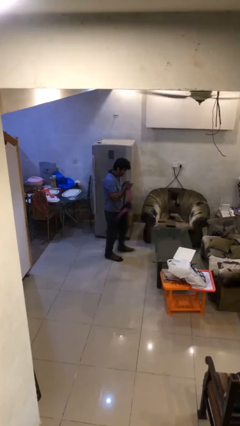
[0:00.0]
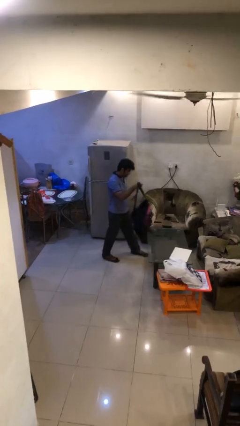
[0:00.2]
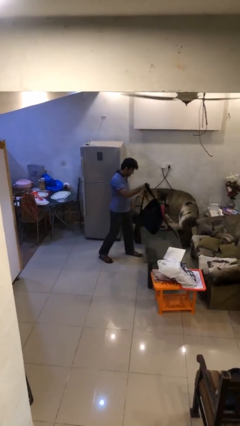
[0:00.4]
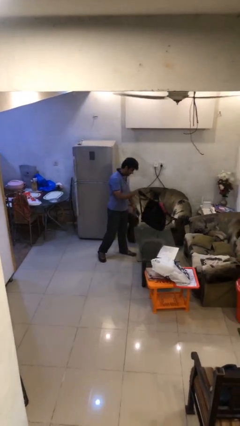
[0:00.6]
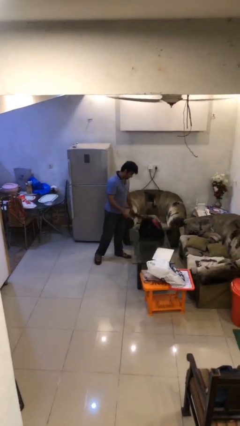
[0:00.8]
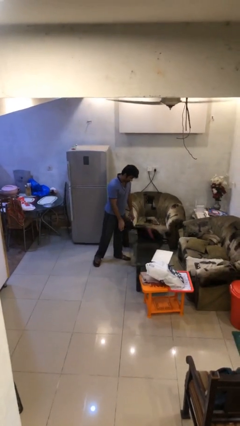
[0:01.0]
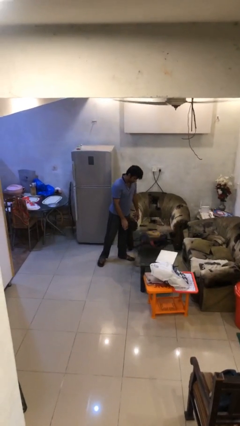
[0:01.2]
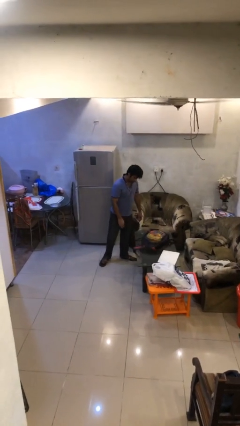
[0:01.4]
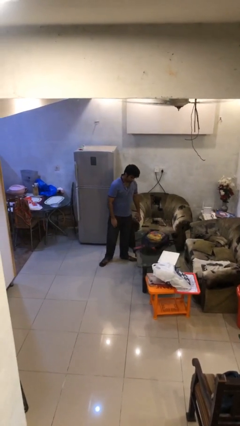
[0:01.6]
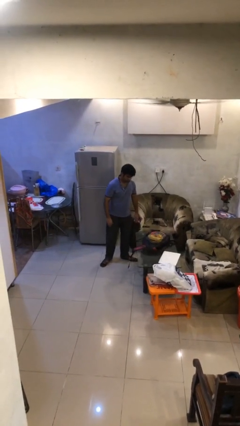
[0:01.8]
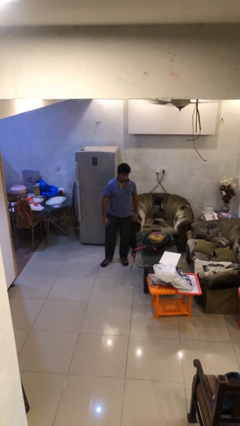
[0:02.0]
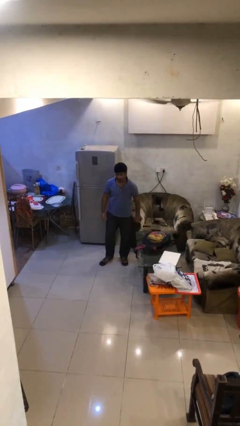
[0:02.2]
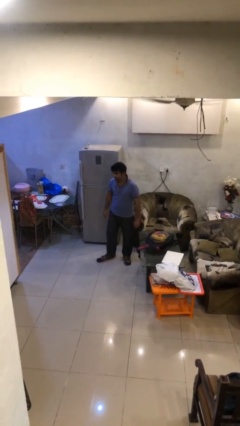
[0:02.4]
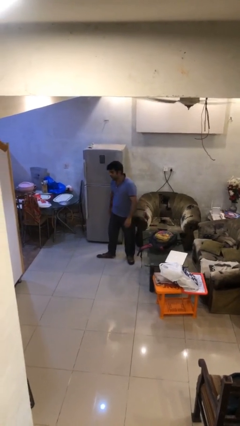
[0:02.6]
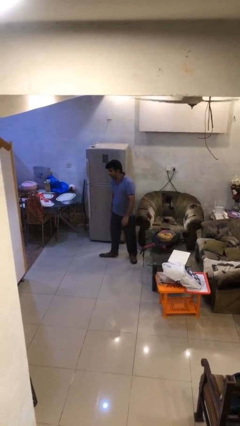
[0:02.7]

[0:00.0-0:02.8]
person puts down object on table

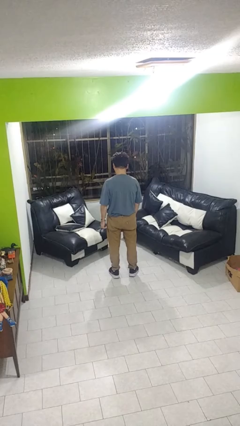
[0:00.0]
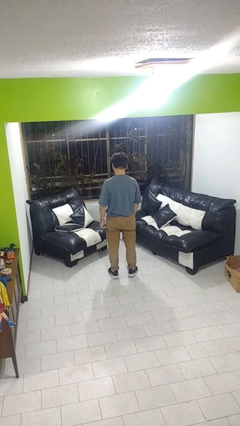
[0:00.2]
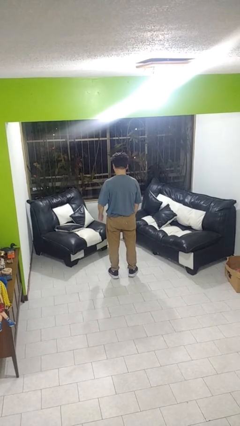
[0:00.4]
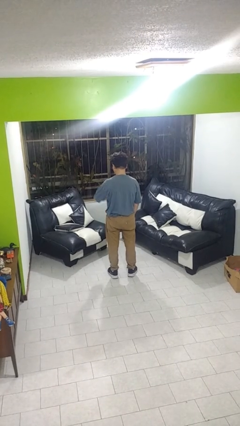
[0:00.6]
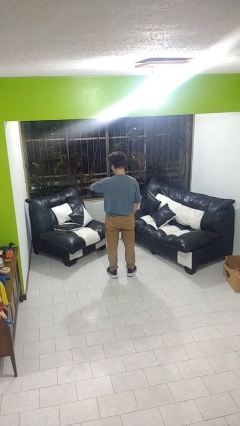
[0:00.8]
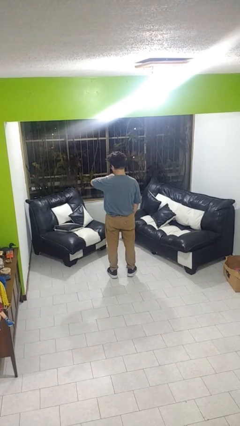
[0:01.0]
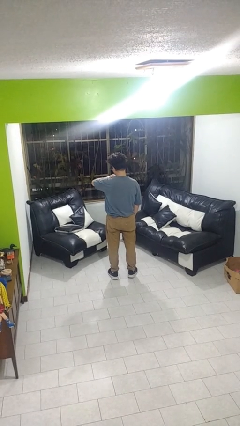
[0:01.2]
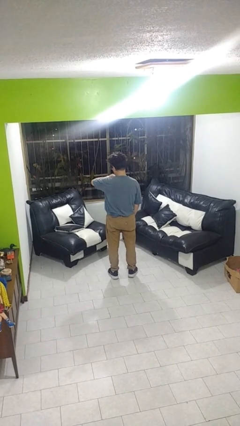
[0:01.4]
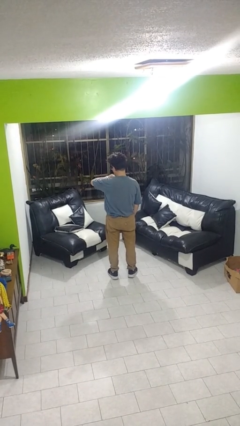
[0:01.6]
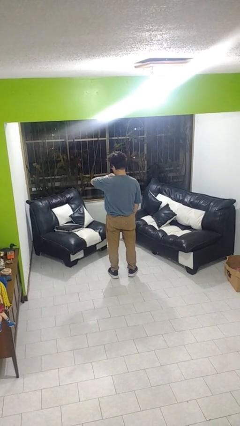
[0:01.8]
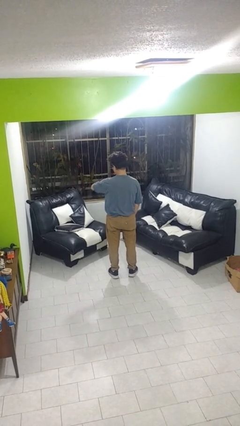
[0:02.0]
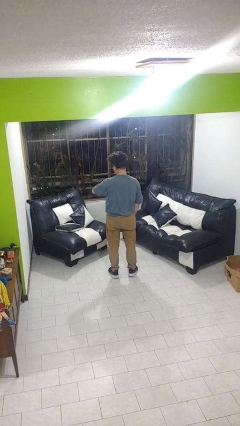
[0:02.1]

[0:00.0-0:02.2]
person looks at wristwatch

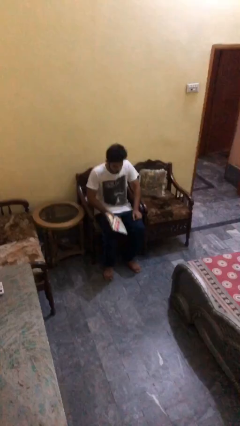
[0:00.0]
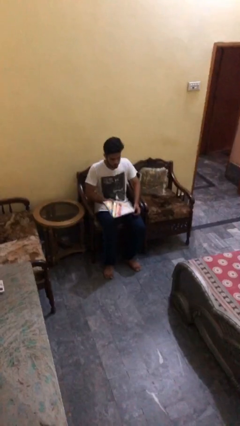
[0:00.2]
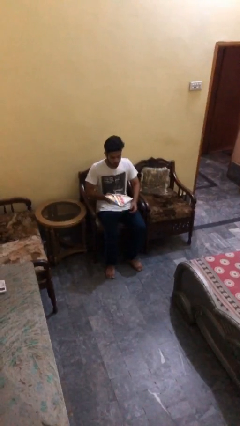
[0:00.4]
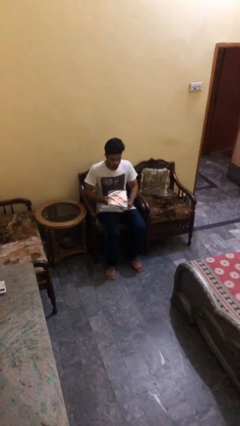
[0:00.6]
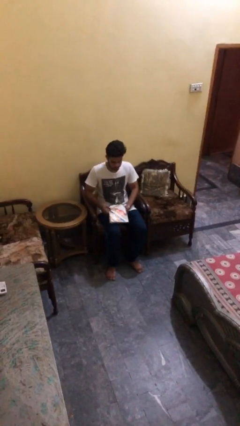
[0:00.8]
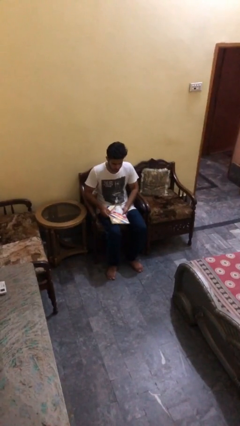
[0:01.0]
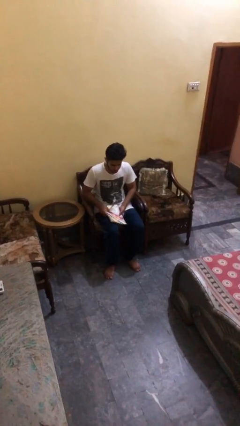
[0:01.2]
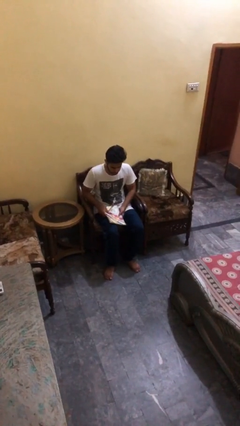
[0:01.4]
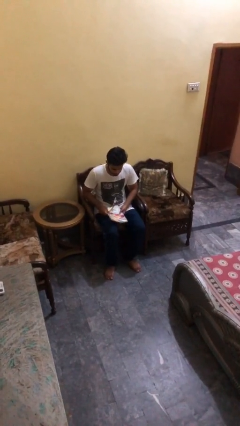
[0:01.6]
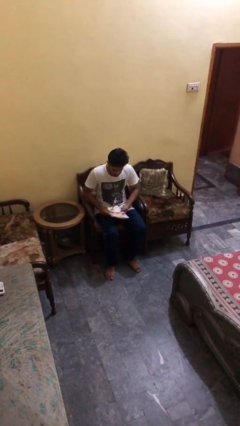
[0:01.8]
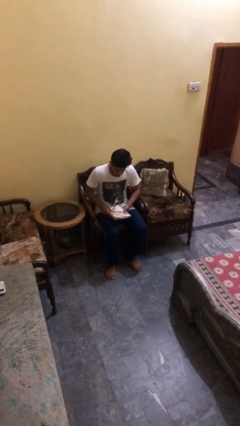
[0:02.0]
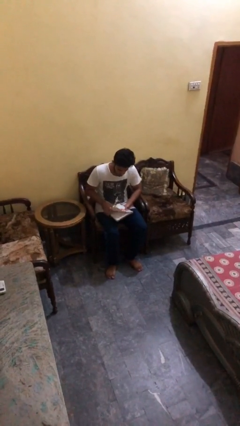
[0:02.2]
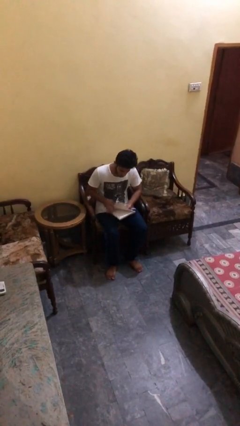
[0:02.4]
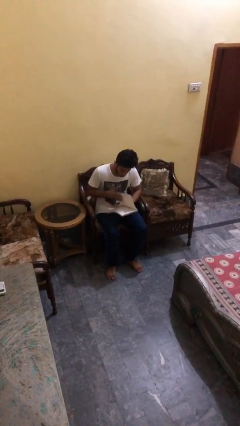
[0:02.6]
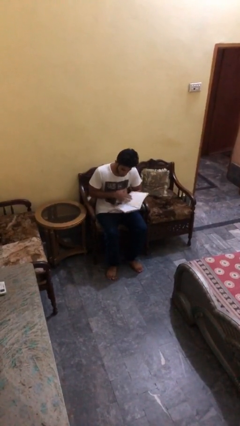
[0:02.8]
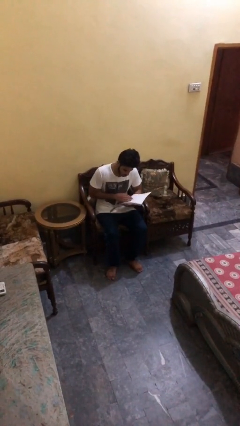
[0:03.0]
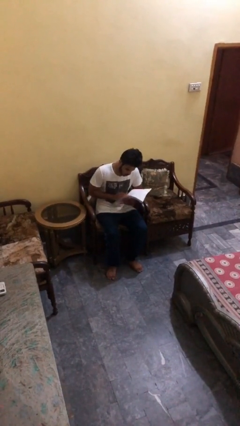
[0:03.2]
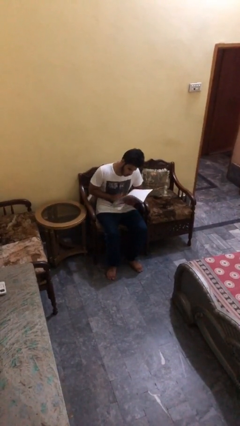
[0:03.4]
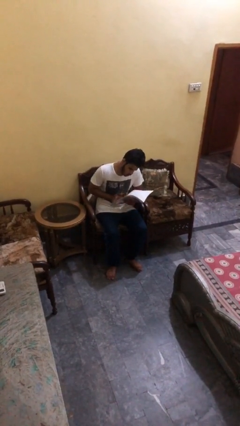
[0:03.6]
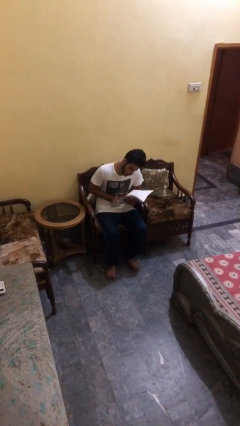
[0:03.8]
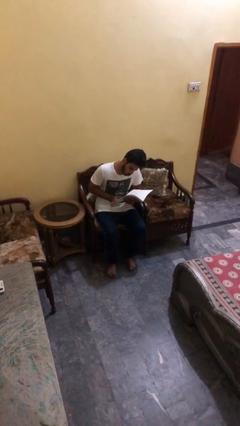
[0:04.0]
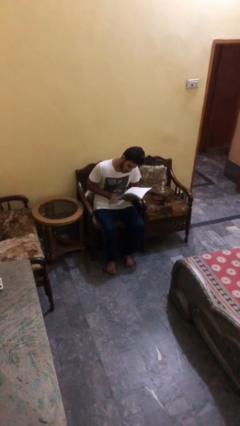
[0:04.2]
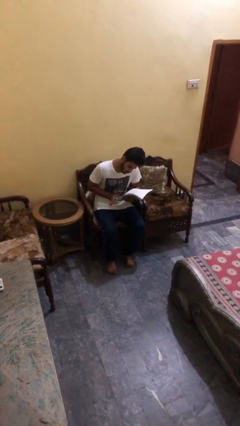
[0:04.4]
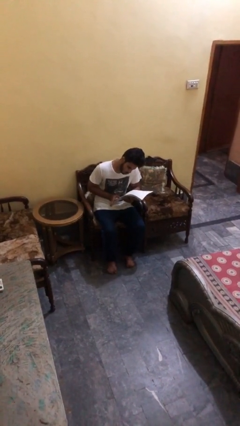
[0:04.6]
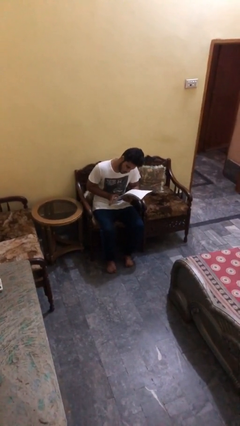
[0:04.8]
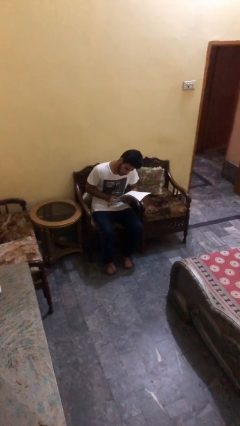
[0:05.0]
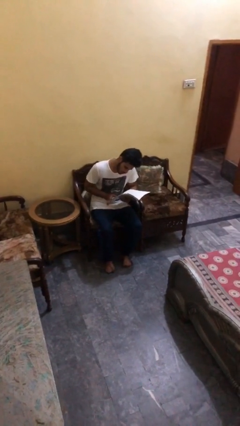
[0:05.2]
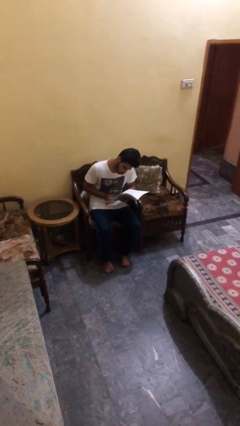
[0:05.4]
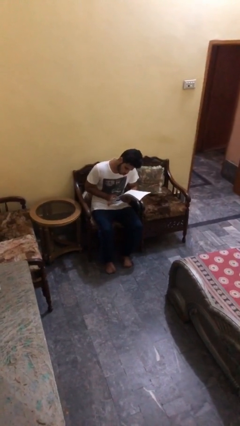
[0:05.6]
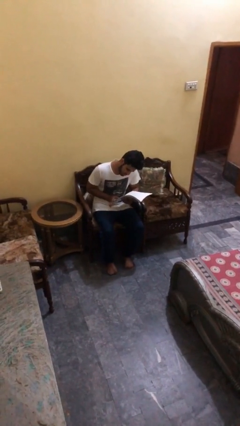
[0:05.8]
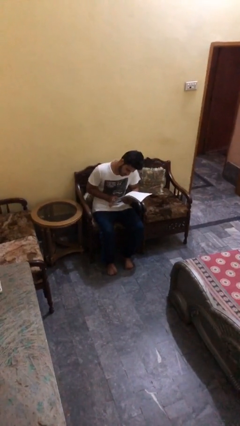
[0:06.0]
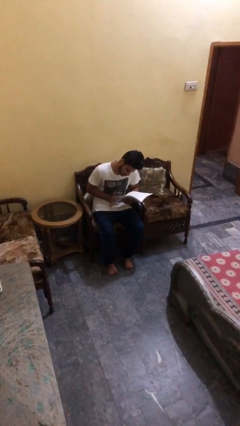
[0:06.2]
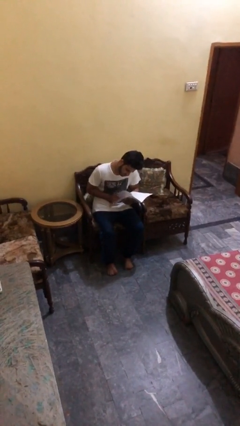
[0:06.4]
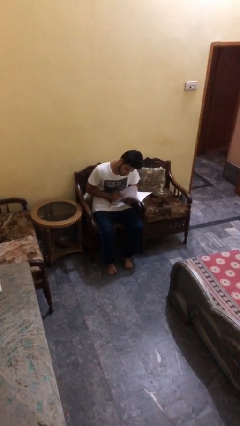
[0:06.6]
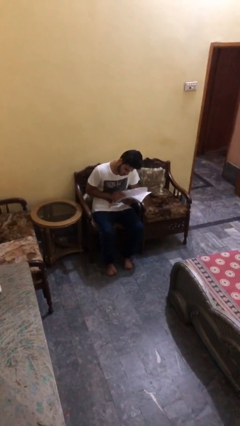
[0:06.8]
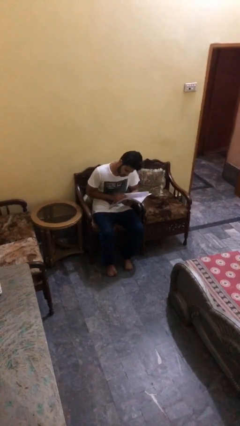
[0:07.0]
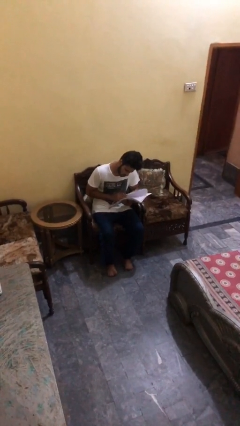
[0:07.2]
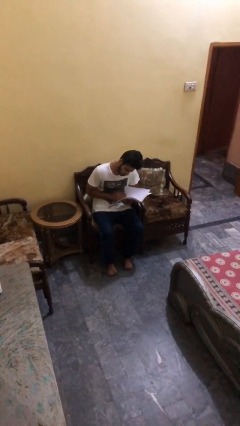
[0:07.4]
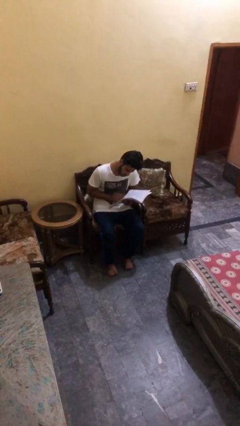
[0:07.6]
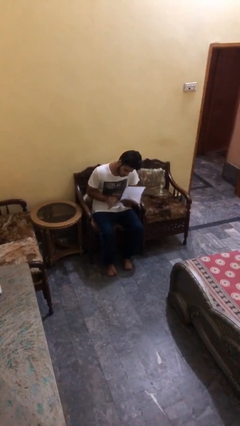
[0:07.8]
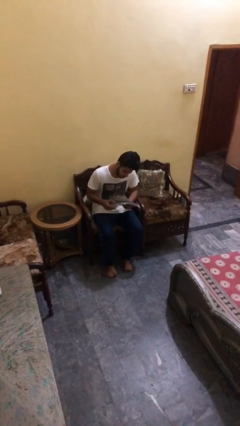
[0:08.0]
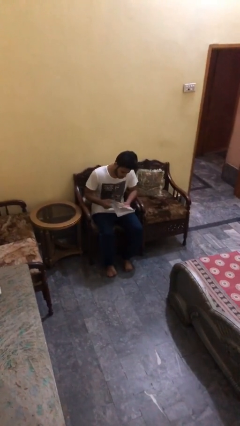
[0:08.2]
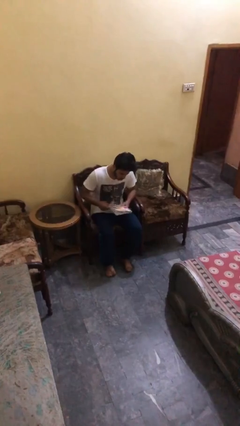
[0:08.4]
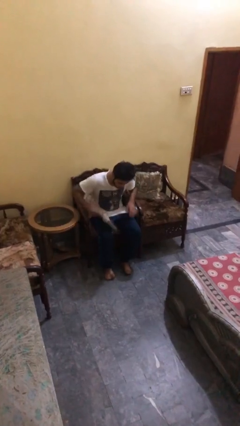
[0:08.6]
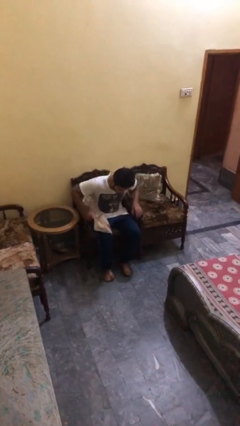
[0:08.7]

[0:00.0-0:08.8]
person reads document

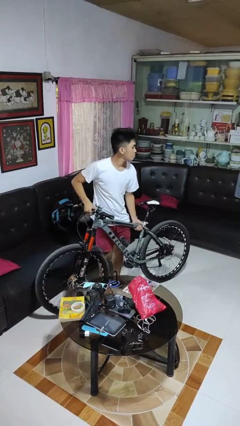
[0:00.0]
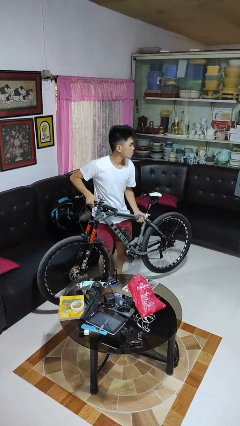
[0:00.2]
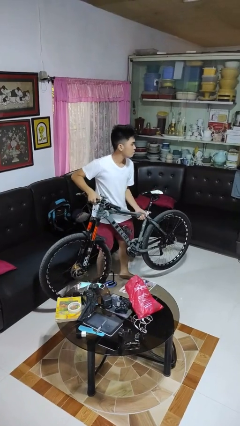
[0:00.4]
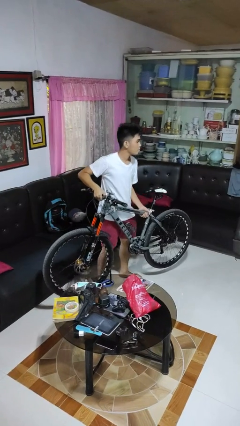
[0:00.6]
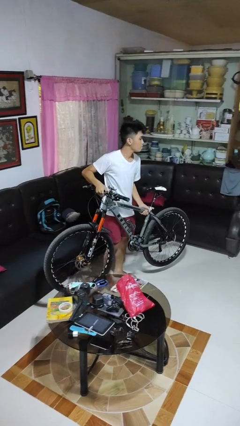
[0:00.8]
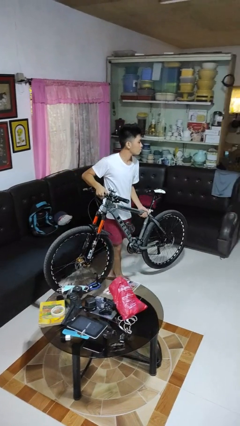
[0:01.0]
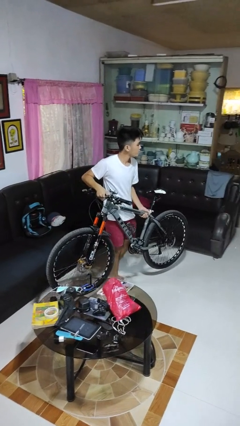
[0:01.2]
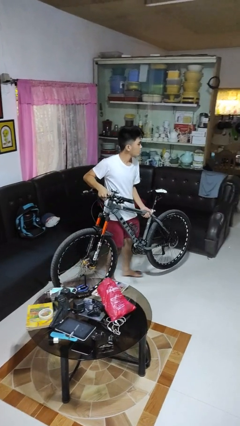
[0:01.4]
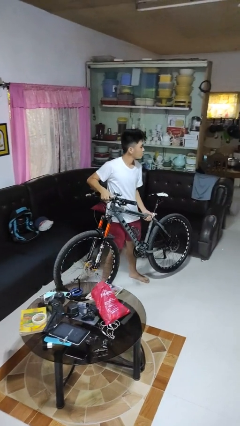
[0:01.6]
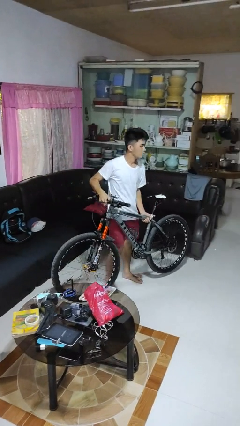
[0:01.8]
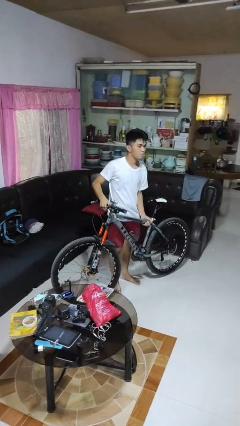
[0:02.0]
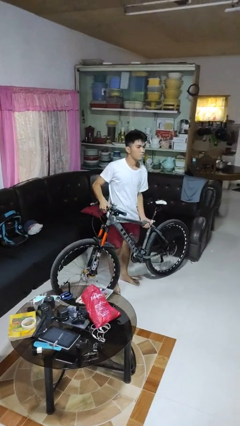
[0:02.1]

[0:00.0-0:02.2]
person carries bicycle

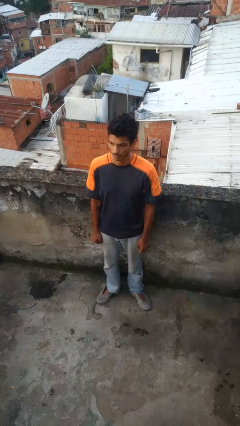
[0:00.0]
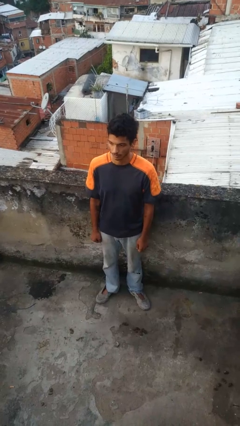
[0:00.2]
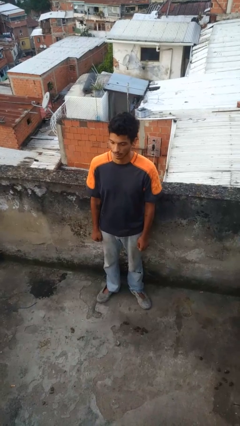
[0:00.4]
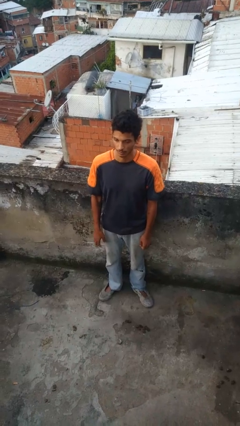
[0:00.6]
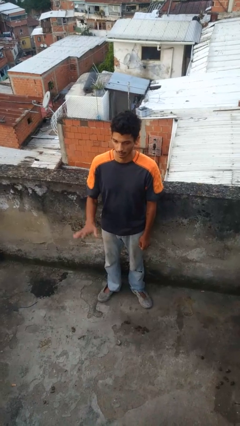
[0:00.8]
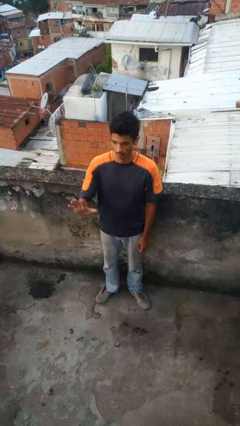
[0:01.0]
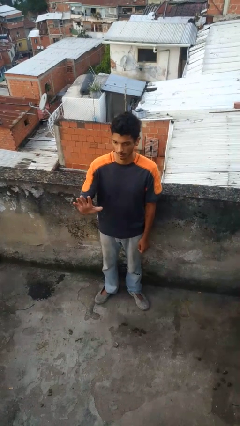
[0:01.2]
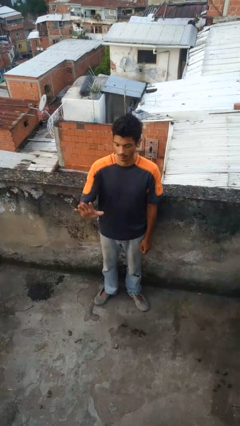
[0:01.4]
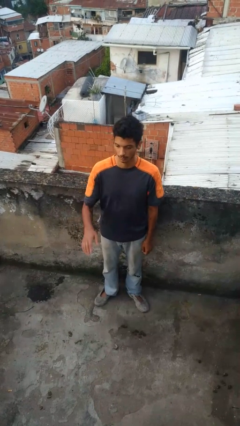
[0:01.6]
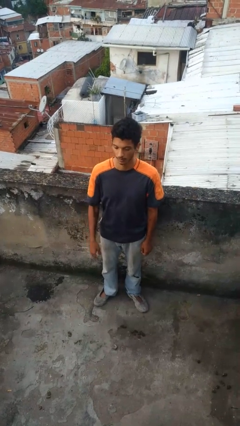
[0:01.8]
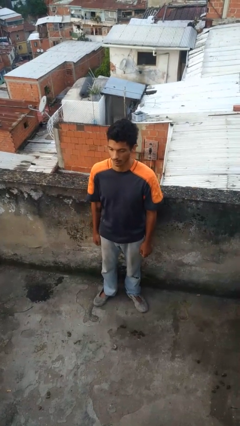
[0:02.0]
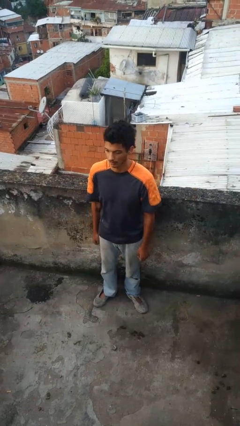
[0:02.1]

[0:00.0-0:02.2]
person gestures number five
